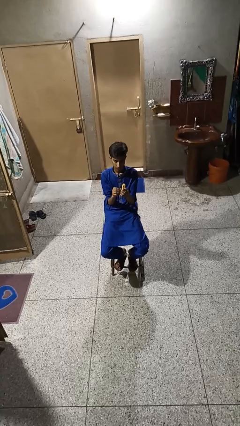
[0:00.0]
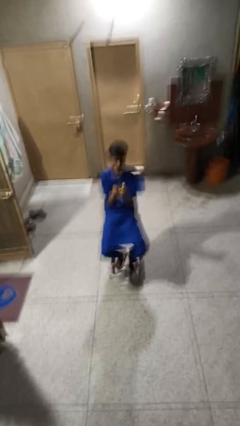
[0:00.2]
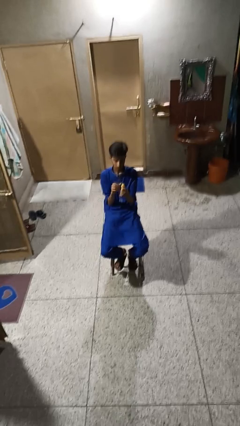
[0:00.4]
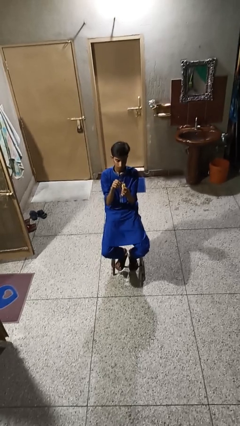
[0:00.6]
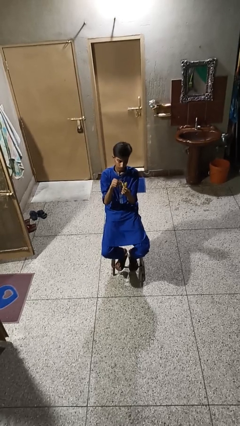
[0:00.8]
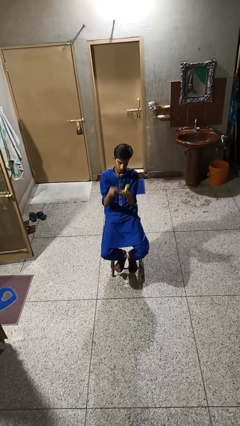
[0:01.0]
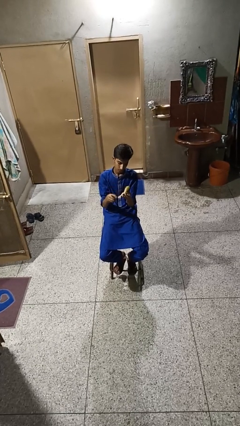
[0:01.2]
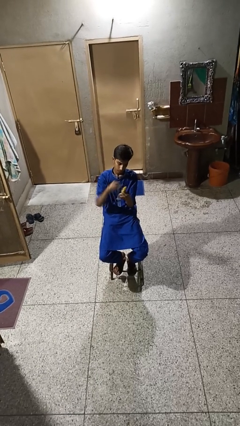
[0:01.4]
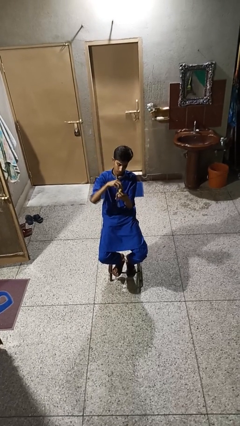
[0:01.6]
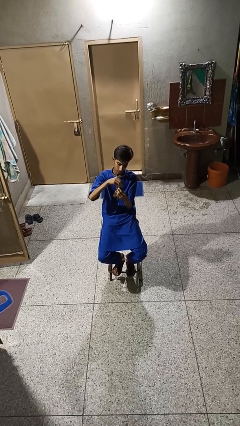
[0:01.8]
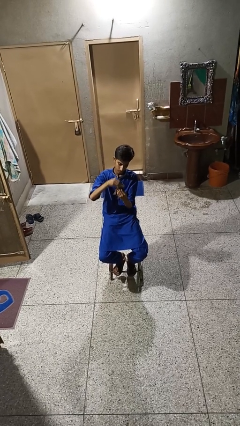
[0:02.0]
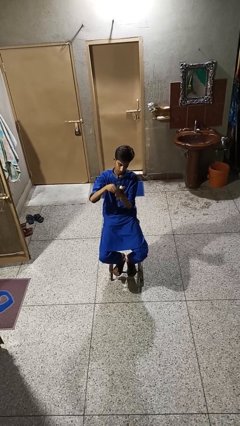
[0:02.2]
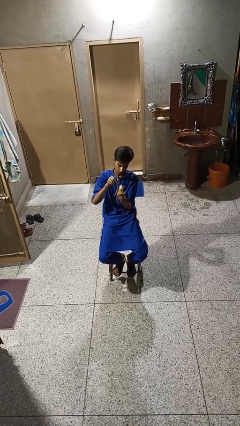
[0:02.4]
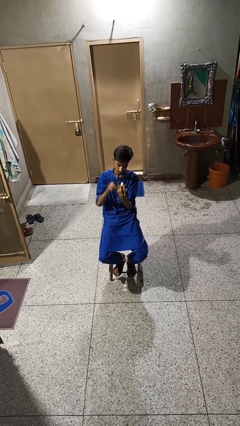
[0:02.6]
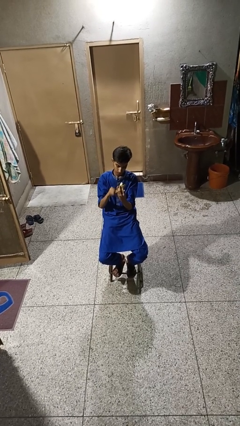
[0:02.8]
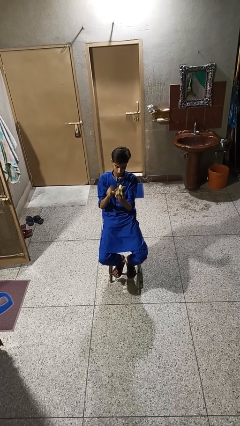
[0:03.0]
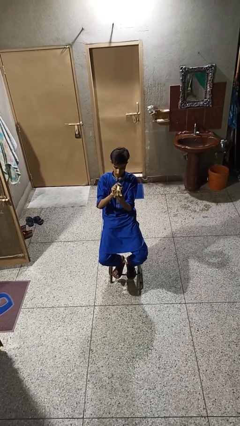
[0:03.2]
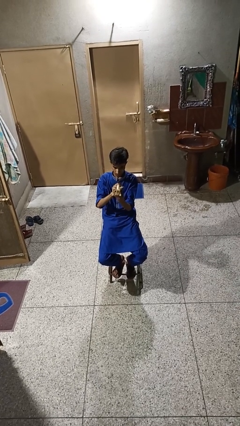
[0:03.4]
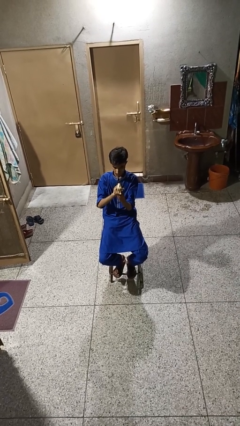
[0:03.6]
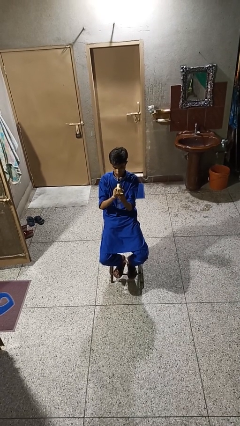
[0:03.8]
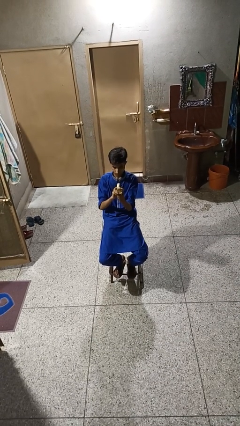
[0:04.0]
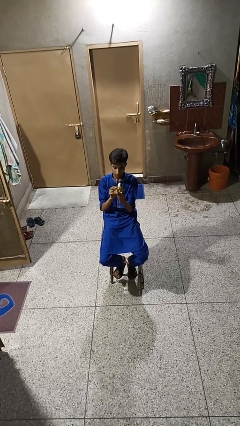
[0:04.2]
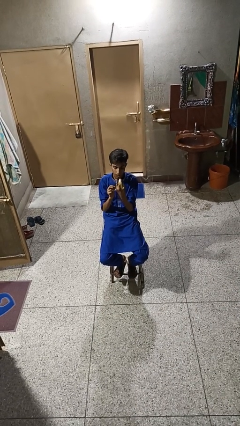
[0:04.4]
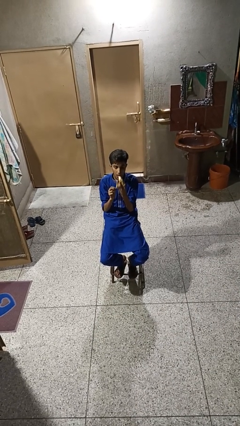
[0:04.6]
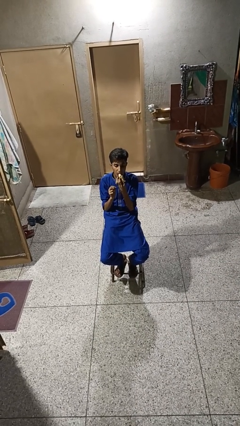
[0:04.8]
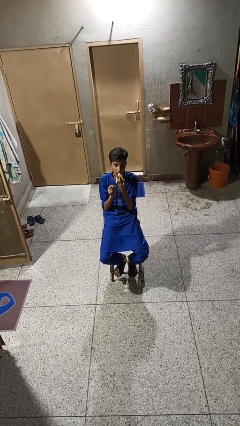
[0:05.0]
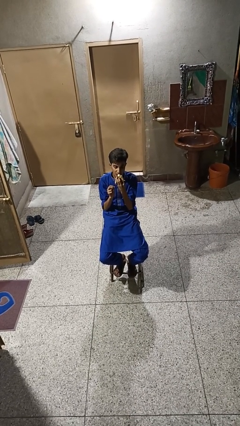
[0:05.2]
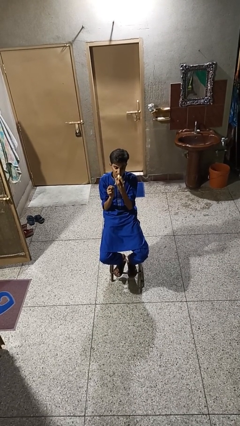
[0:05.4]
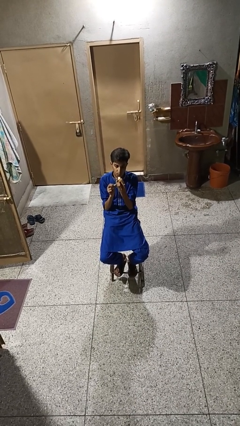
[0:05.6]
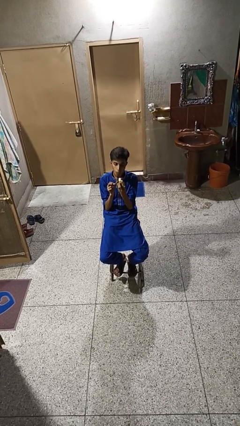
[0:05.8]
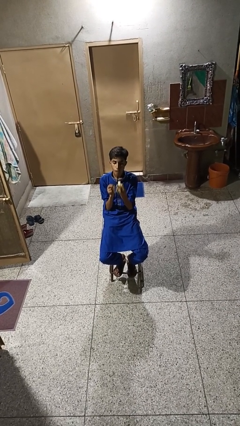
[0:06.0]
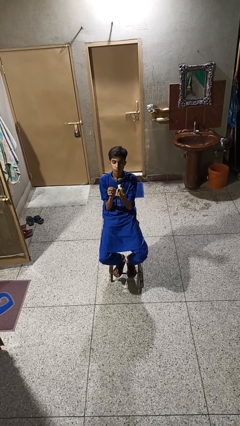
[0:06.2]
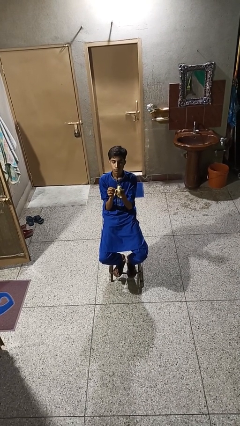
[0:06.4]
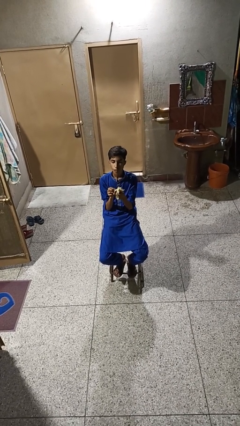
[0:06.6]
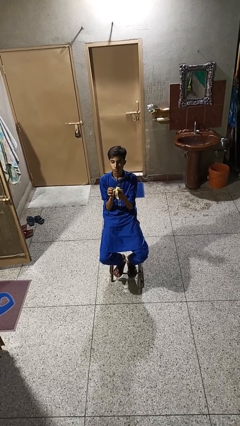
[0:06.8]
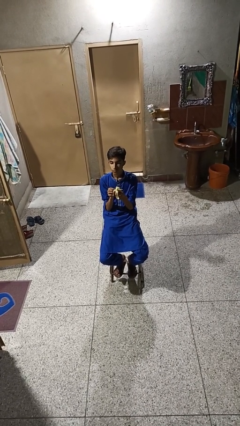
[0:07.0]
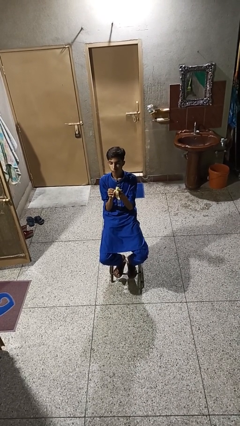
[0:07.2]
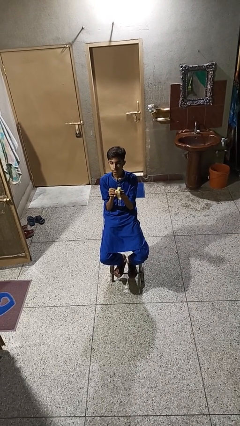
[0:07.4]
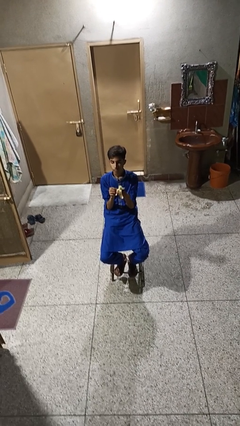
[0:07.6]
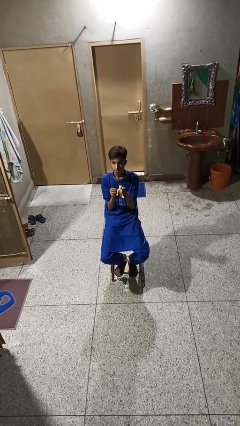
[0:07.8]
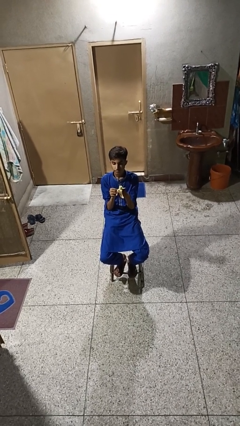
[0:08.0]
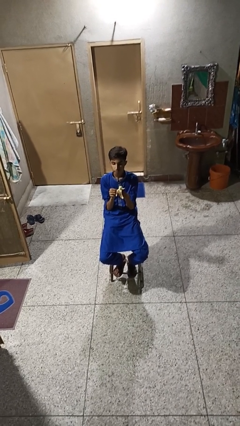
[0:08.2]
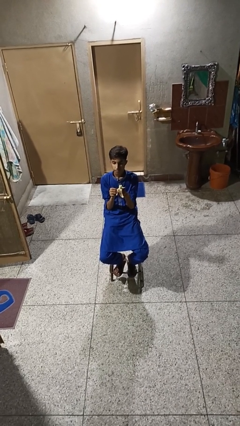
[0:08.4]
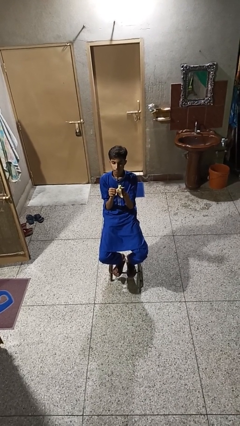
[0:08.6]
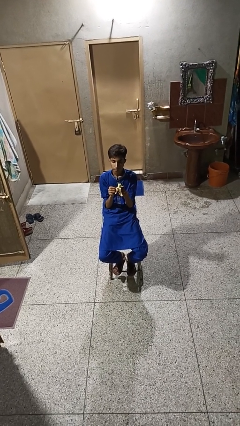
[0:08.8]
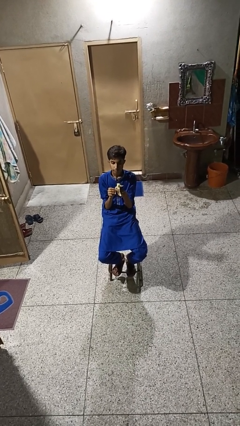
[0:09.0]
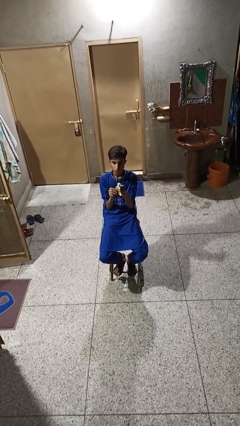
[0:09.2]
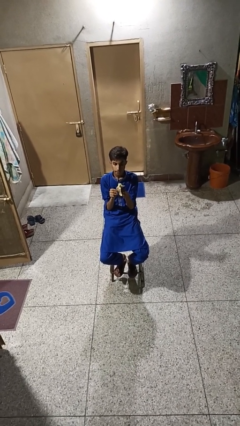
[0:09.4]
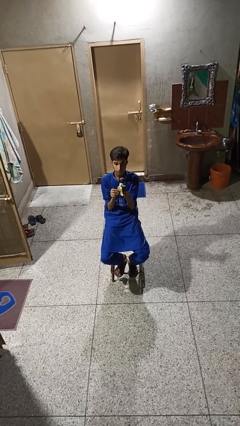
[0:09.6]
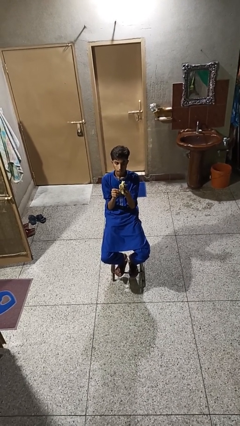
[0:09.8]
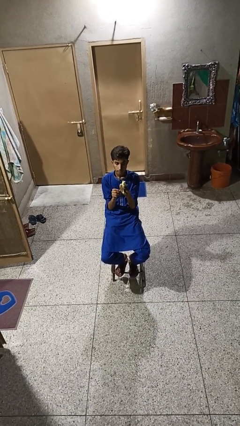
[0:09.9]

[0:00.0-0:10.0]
person eats banana

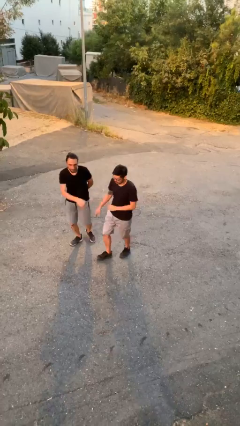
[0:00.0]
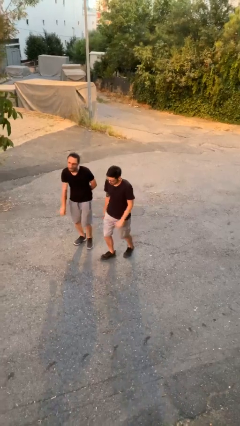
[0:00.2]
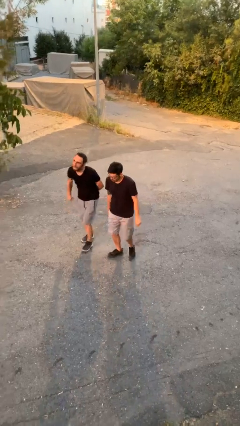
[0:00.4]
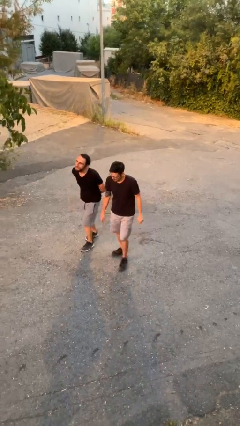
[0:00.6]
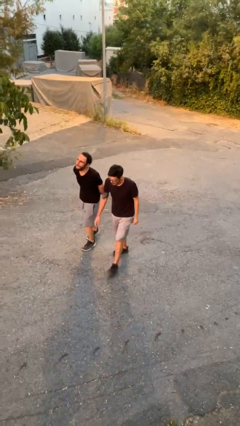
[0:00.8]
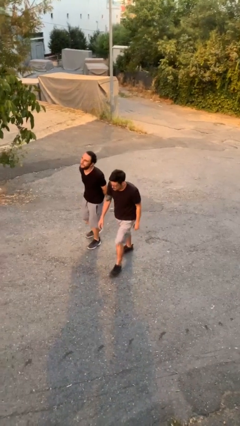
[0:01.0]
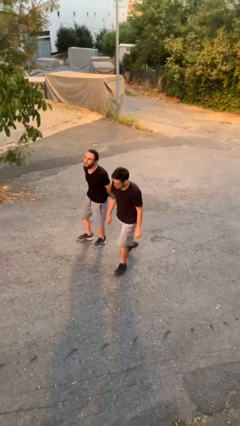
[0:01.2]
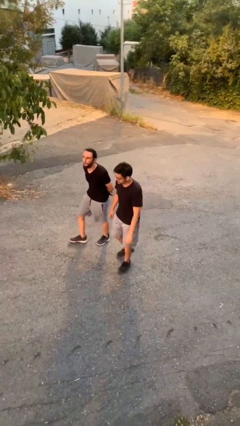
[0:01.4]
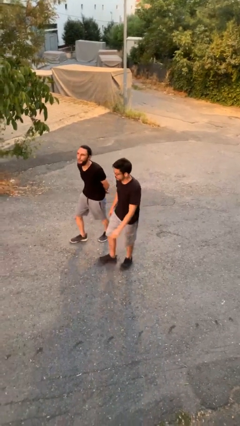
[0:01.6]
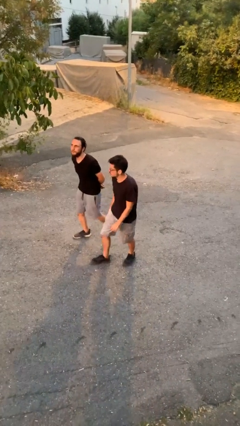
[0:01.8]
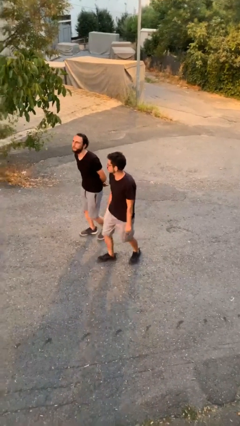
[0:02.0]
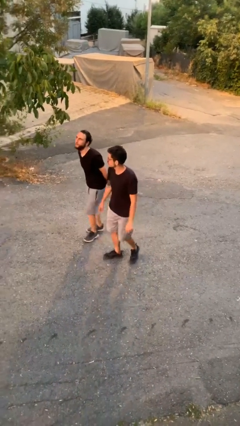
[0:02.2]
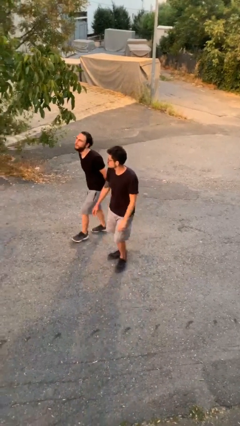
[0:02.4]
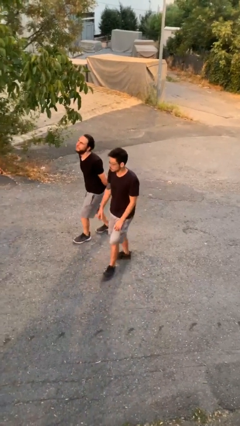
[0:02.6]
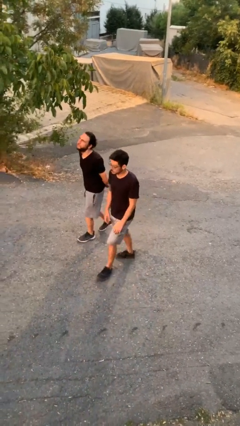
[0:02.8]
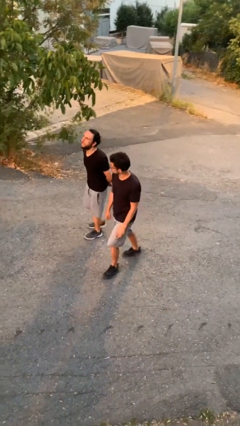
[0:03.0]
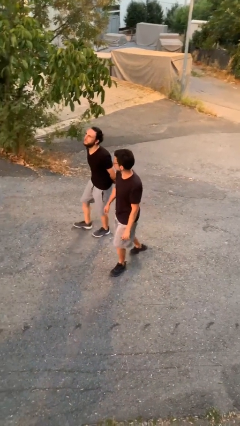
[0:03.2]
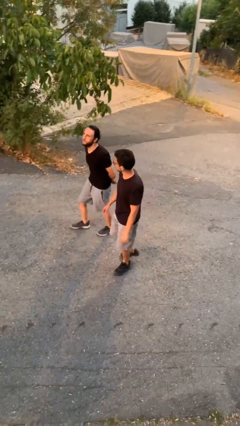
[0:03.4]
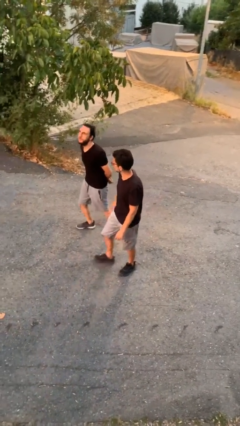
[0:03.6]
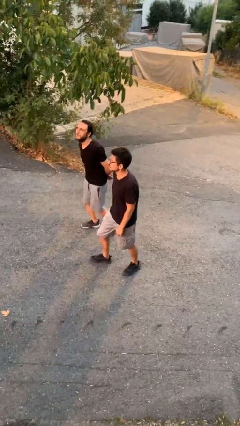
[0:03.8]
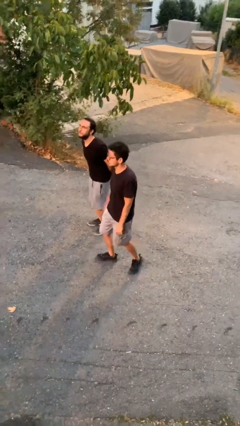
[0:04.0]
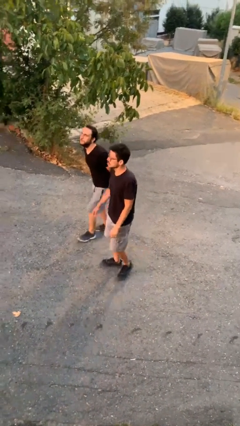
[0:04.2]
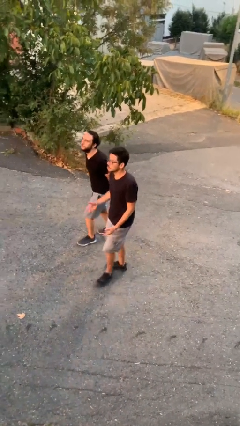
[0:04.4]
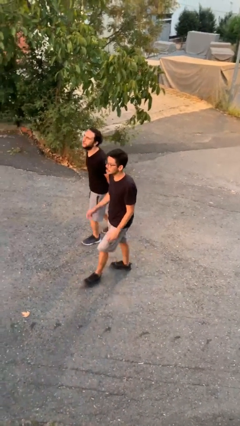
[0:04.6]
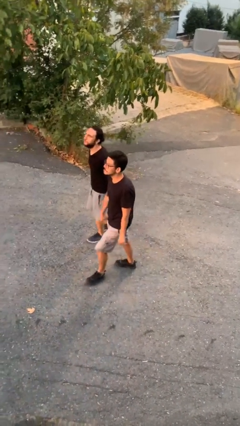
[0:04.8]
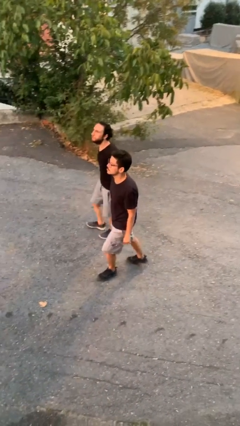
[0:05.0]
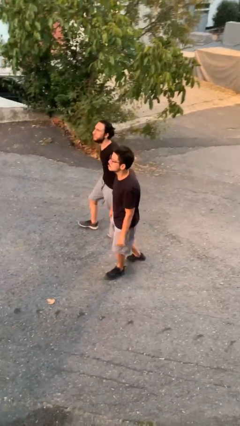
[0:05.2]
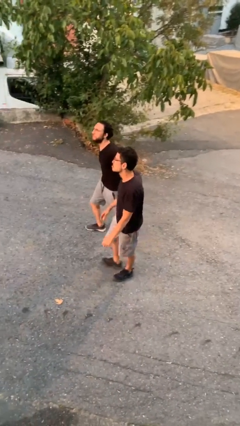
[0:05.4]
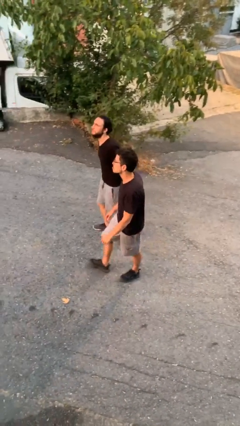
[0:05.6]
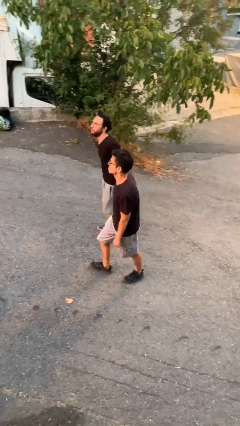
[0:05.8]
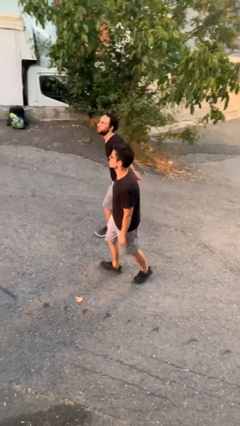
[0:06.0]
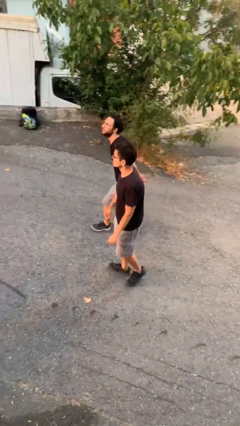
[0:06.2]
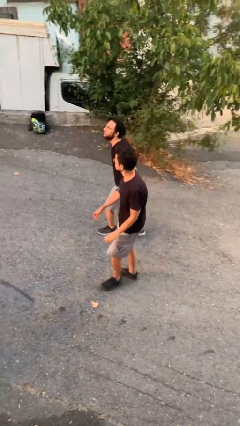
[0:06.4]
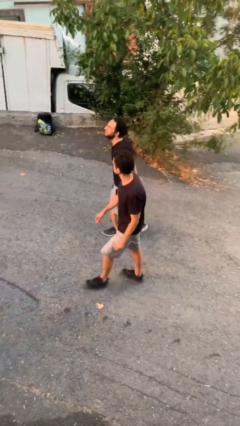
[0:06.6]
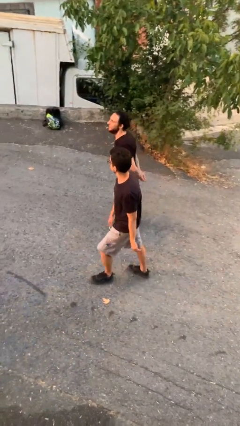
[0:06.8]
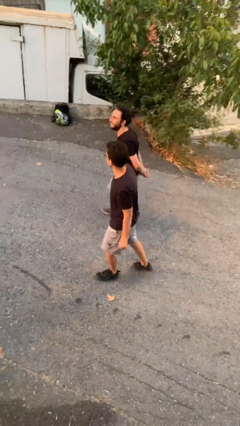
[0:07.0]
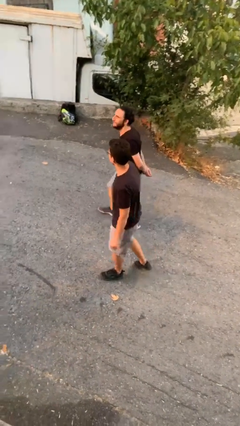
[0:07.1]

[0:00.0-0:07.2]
person talks to person

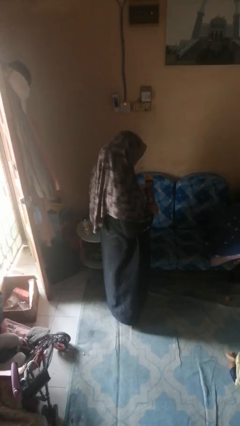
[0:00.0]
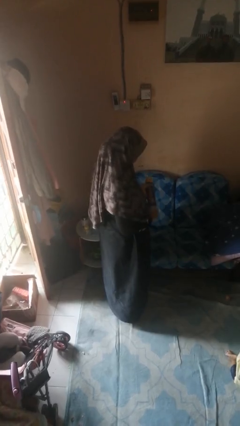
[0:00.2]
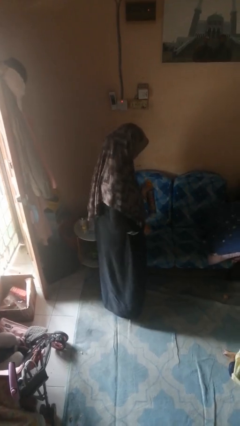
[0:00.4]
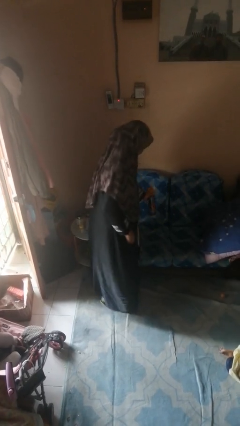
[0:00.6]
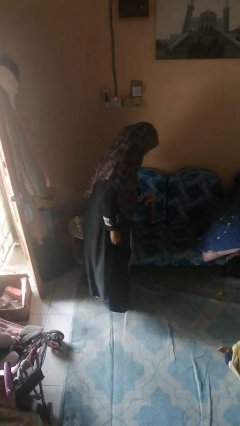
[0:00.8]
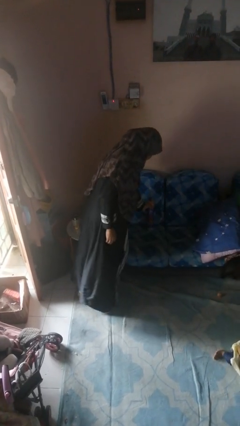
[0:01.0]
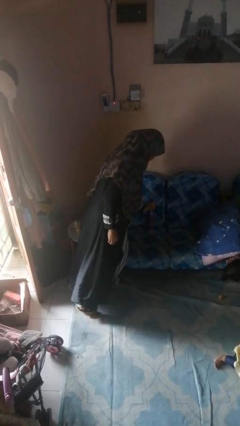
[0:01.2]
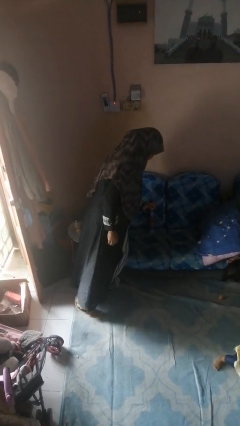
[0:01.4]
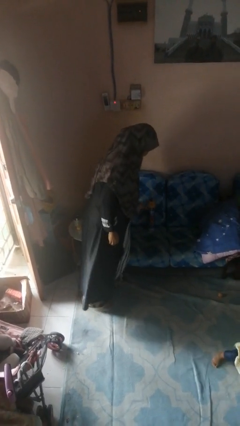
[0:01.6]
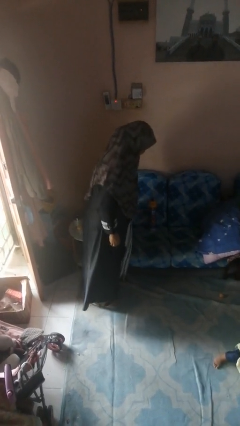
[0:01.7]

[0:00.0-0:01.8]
person puts down object on couch
